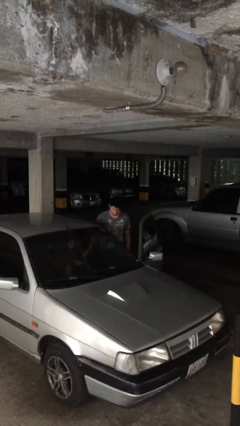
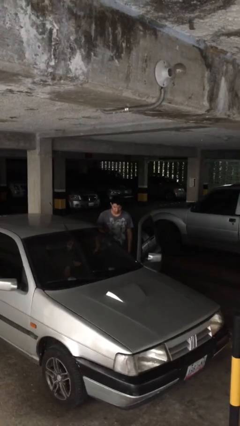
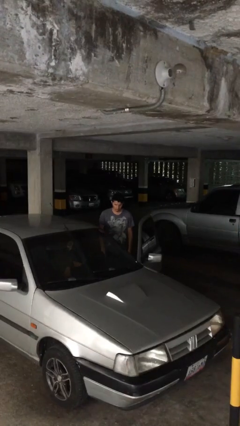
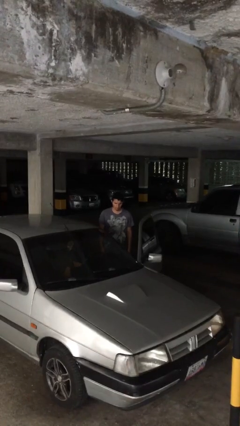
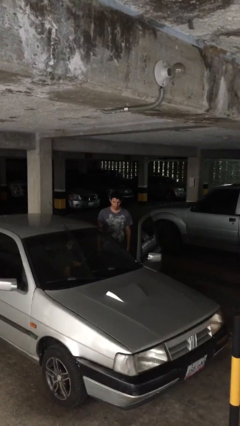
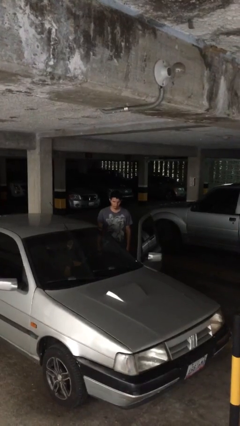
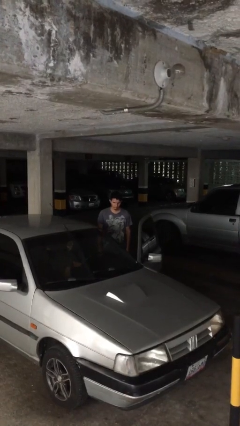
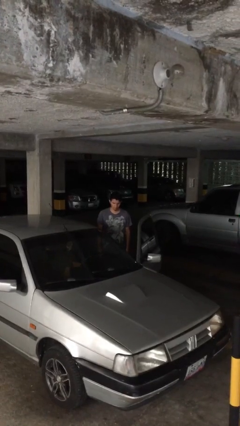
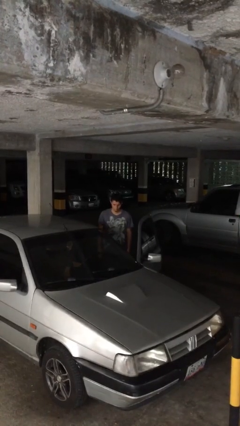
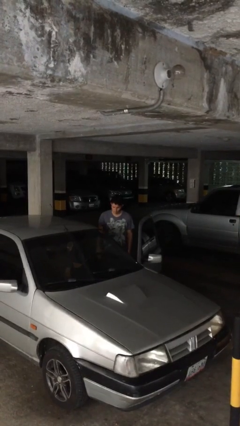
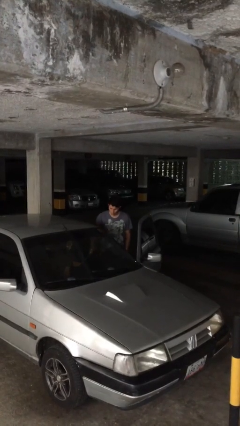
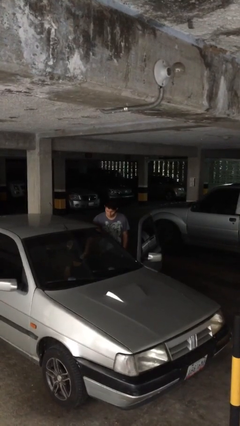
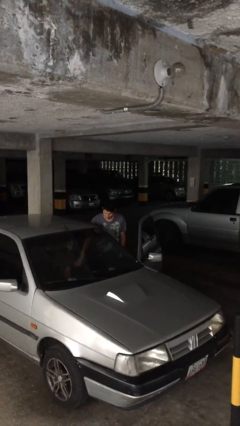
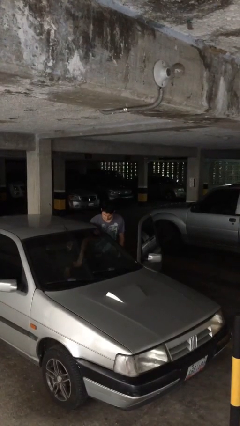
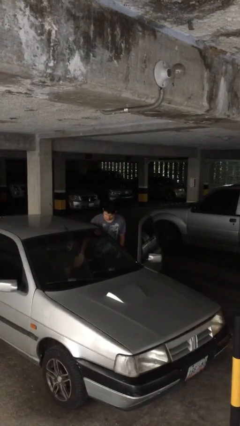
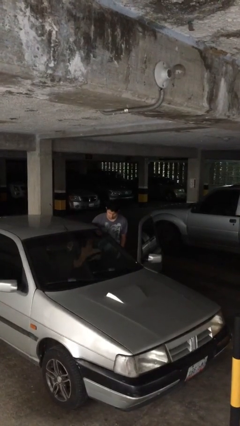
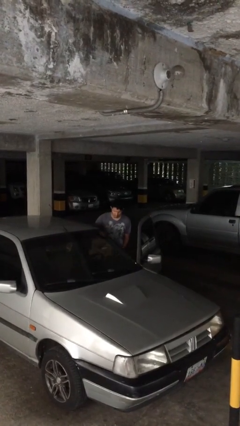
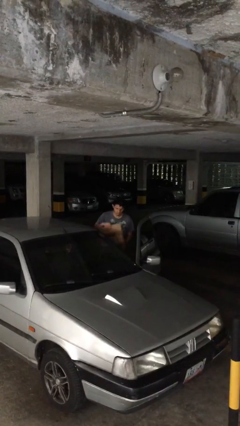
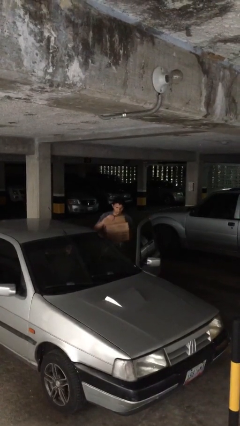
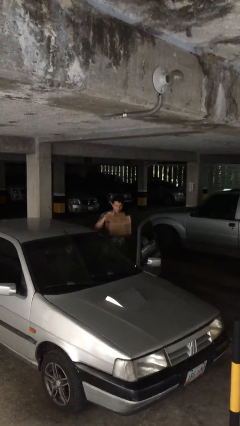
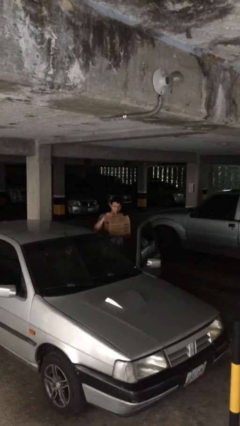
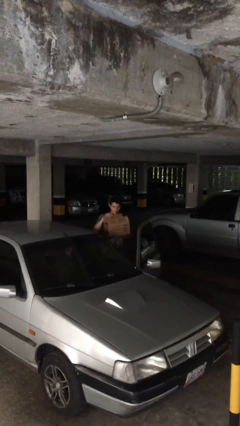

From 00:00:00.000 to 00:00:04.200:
person unloads car

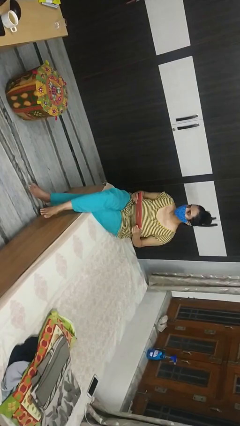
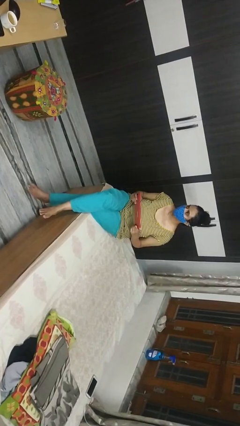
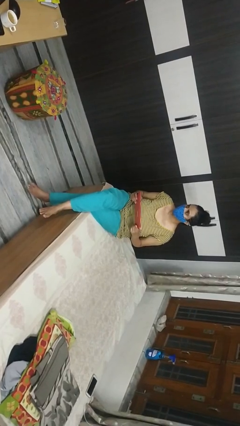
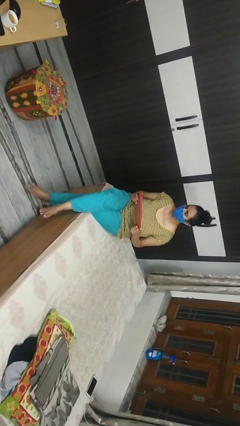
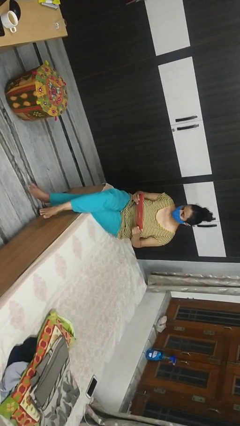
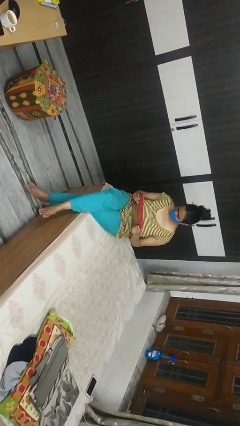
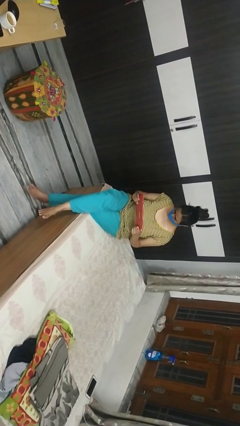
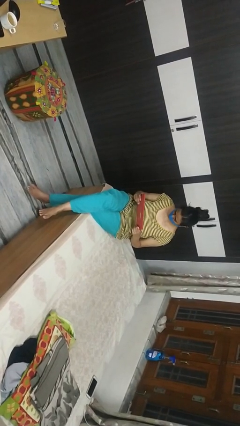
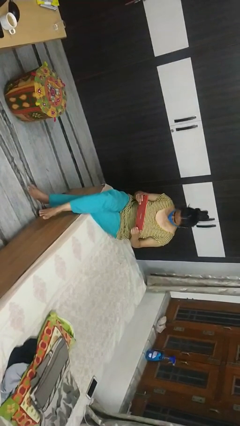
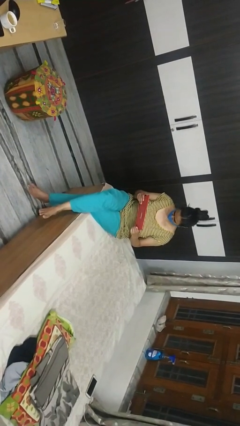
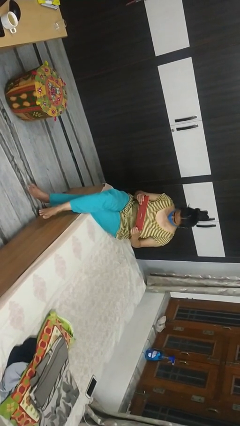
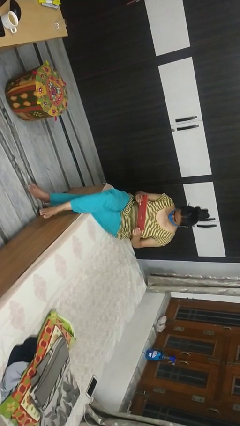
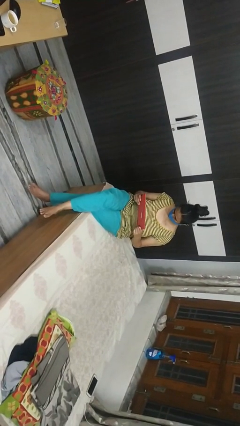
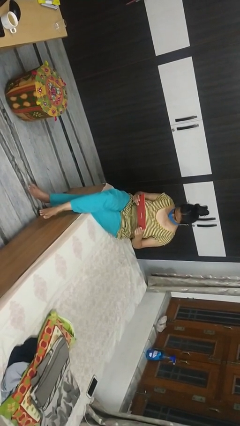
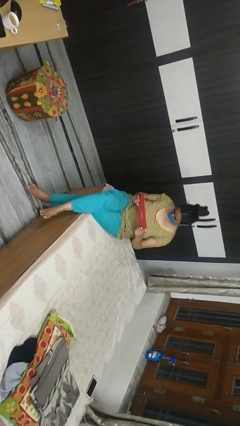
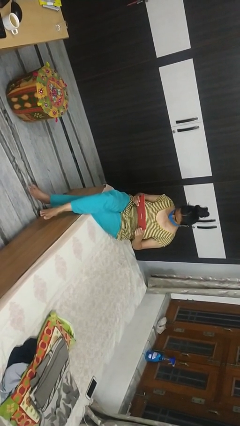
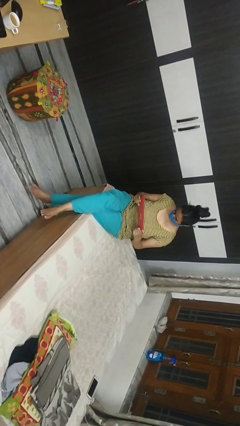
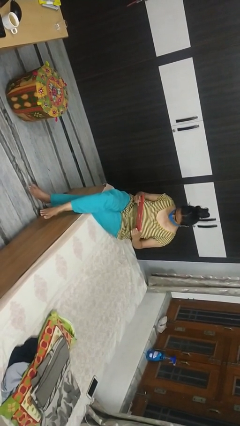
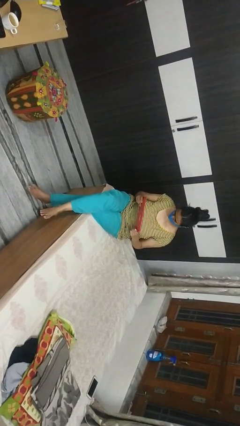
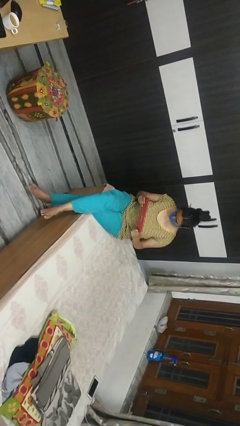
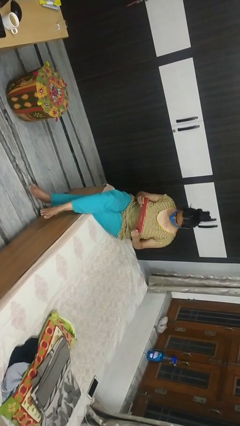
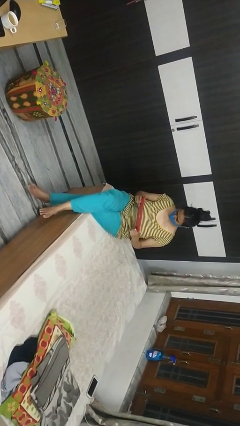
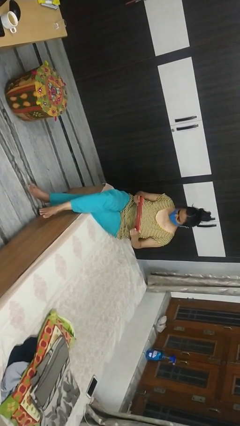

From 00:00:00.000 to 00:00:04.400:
person interacts with handheld game

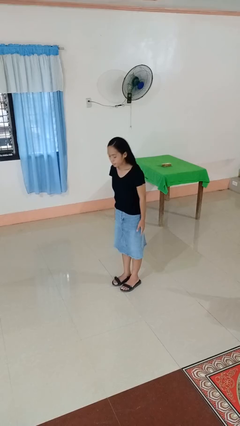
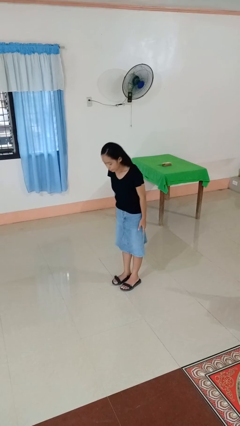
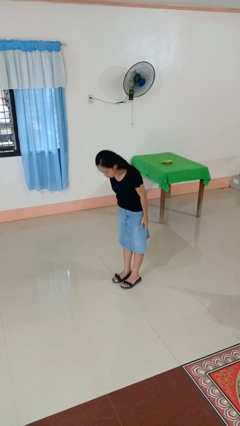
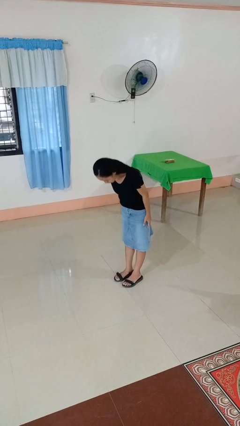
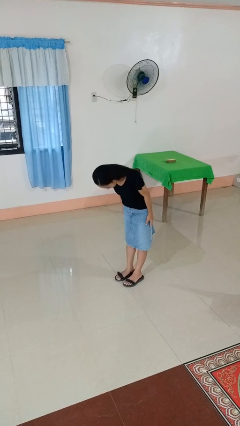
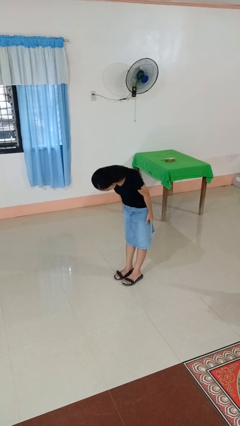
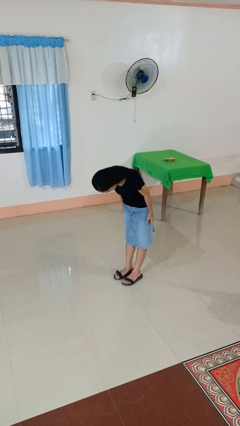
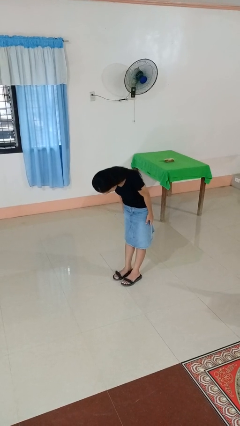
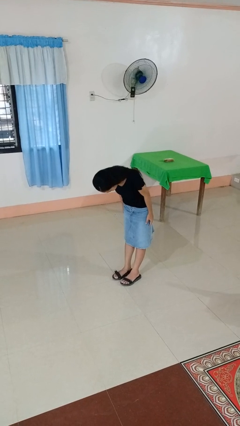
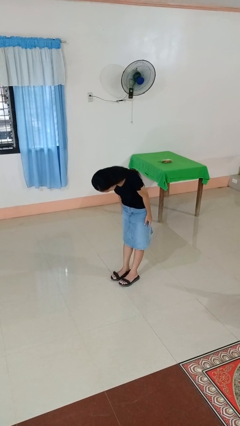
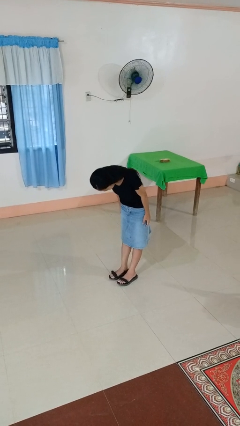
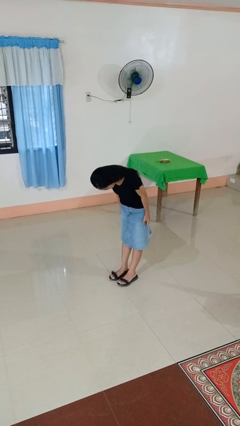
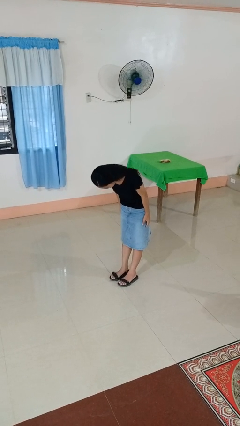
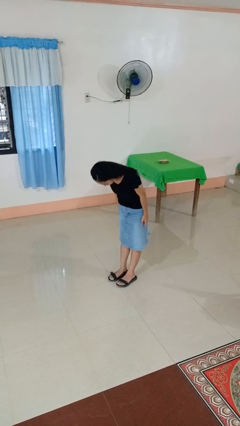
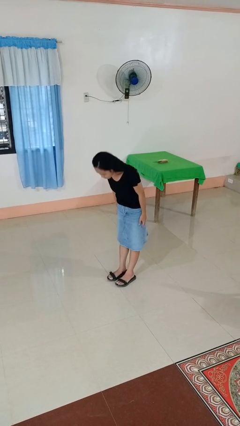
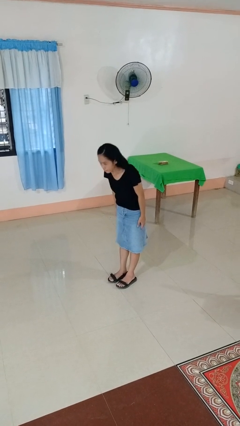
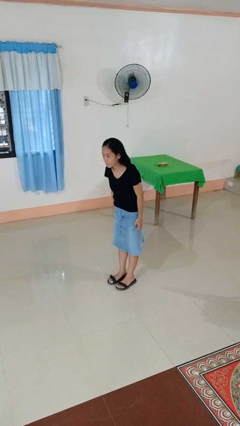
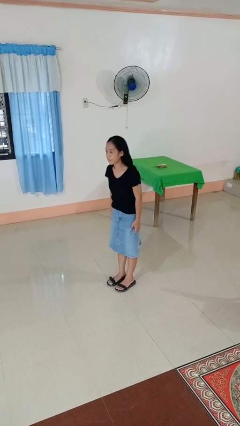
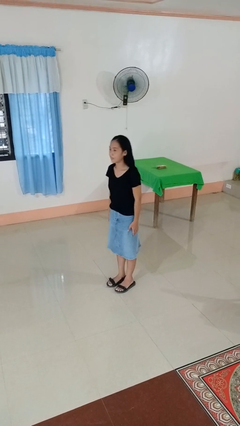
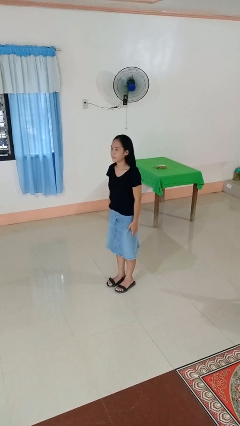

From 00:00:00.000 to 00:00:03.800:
person bows

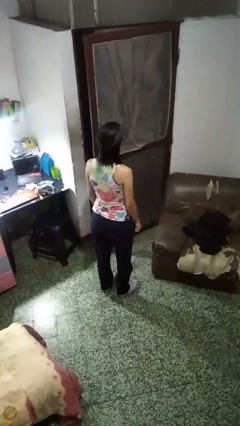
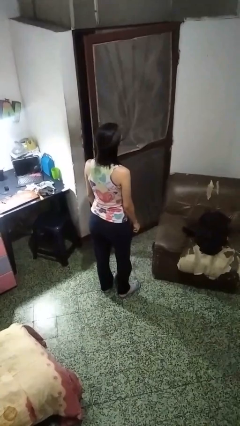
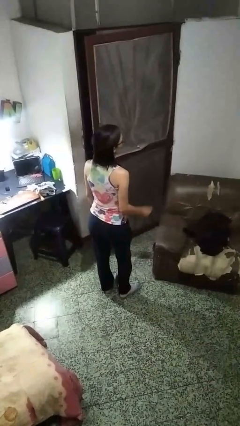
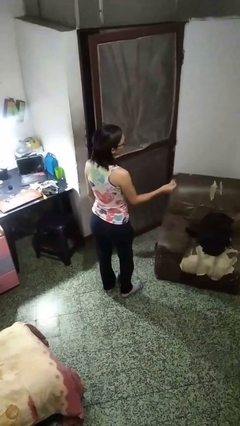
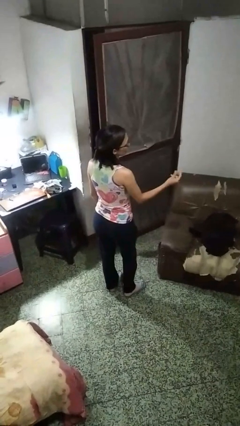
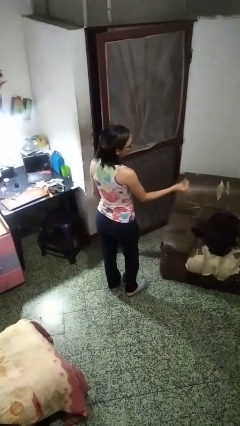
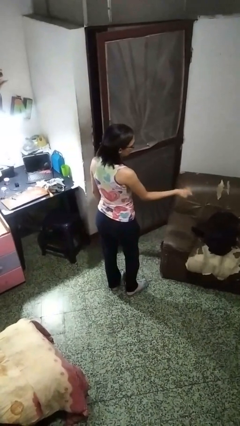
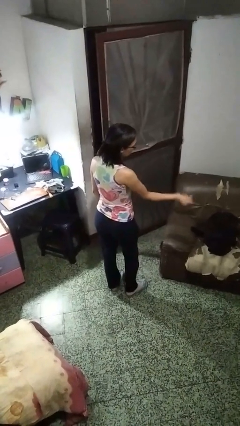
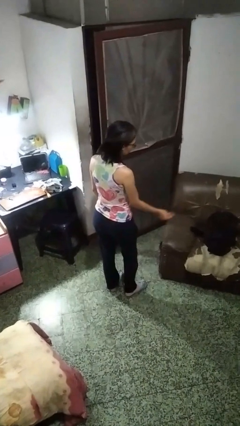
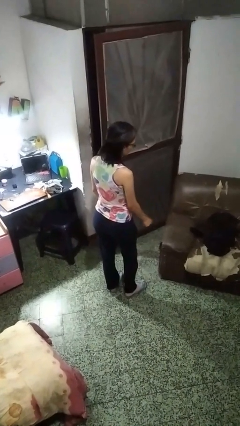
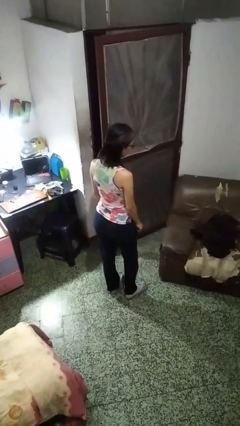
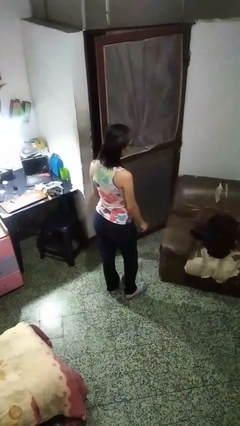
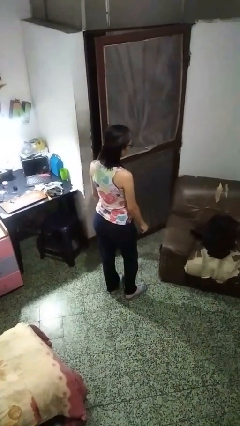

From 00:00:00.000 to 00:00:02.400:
person snaps fingers

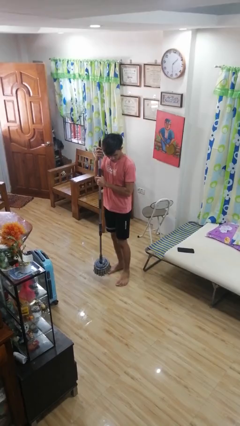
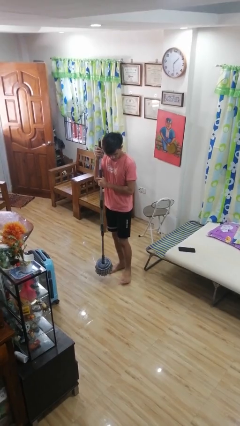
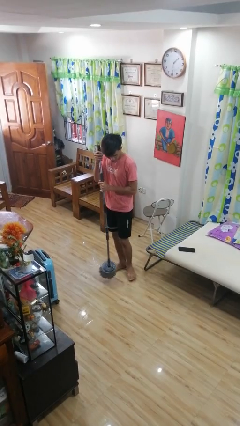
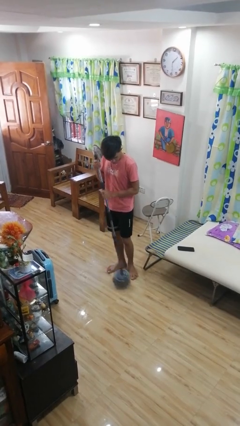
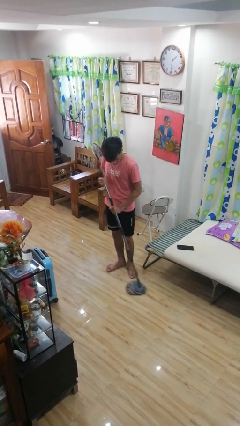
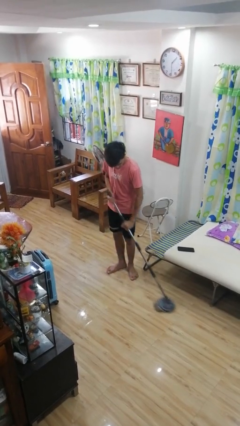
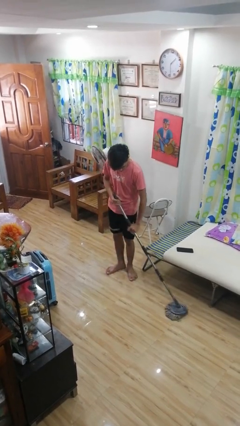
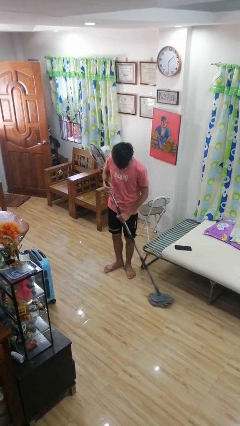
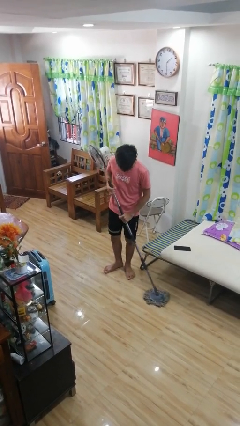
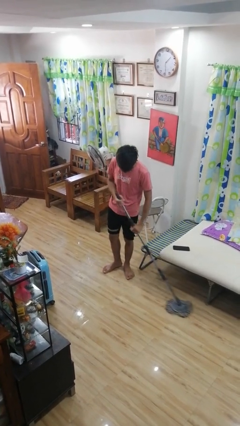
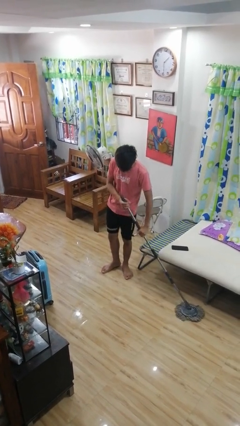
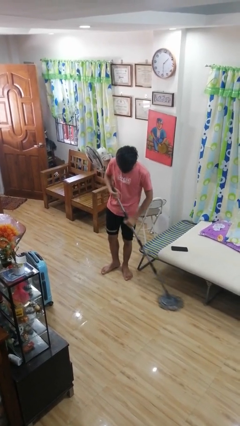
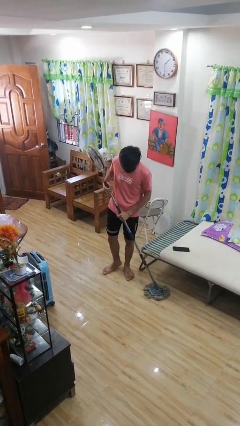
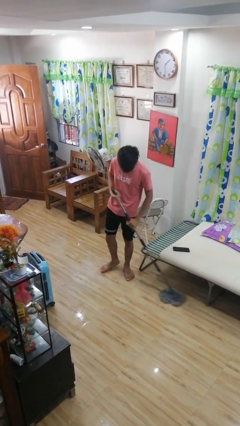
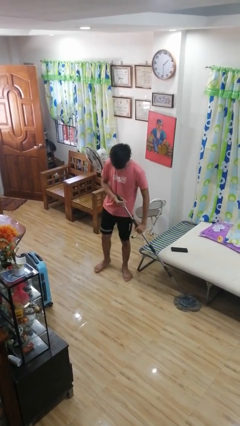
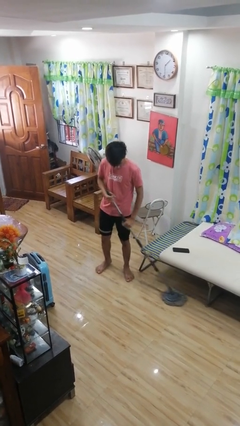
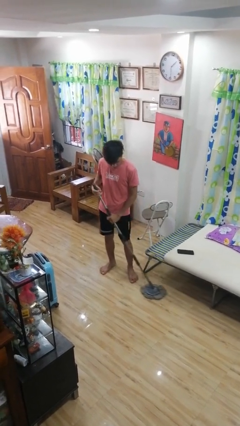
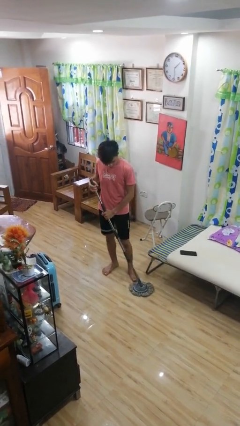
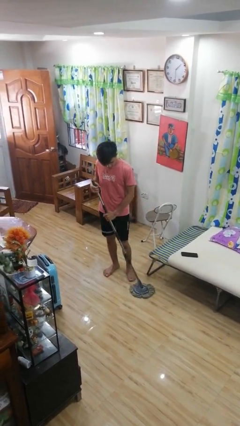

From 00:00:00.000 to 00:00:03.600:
person mops
